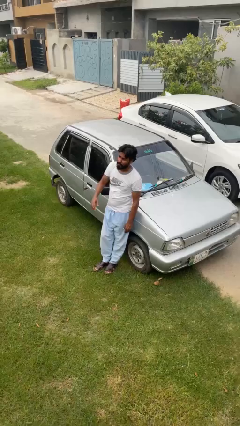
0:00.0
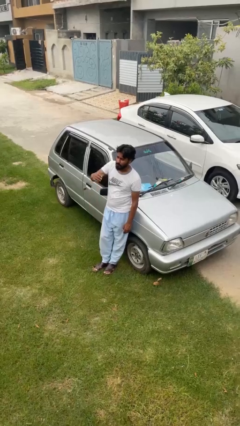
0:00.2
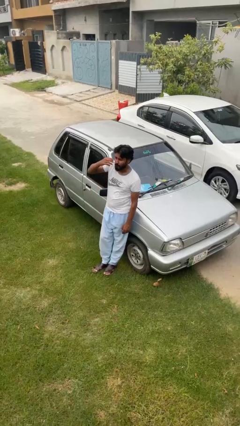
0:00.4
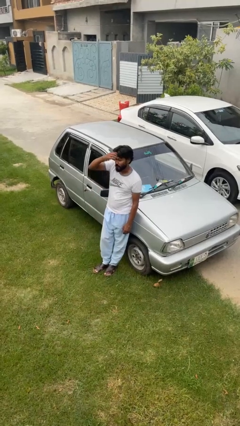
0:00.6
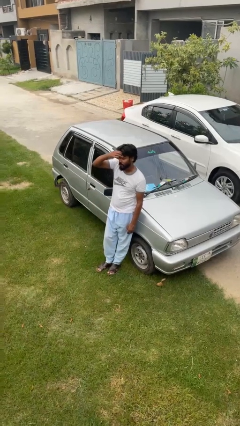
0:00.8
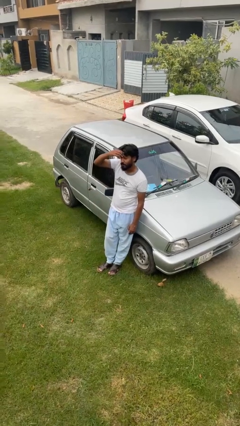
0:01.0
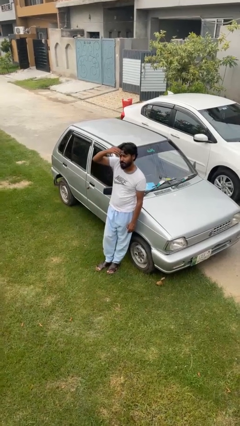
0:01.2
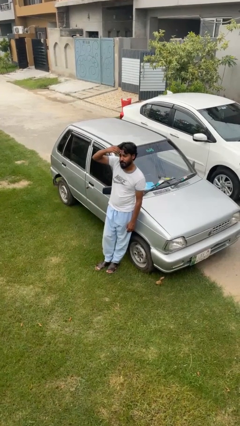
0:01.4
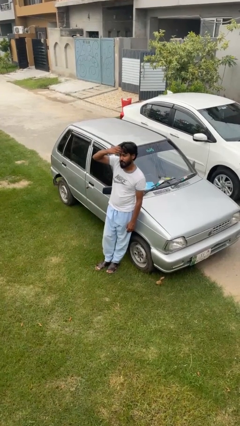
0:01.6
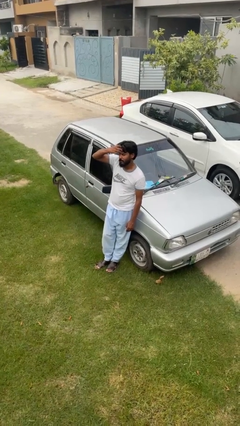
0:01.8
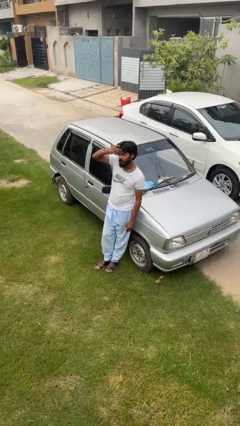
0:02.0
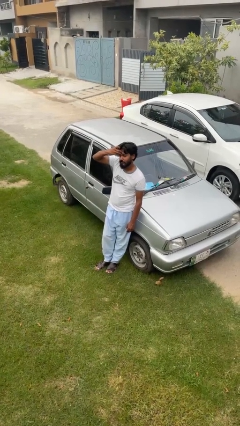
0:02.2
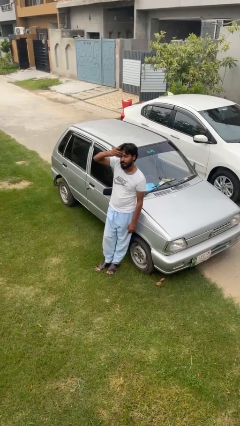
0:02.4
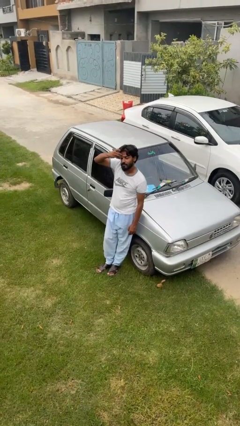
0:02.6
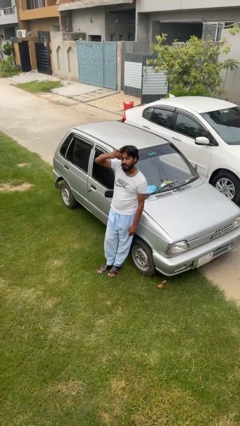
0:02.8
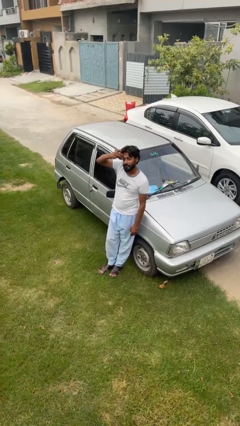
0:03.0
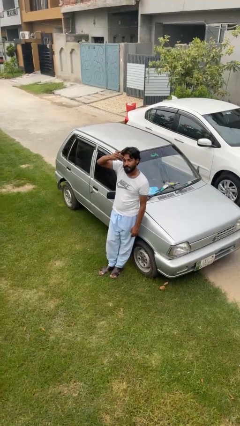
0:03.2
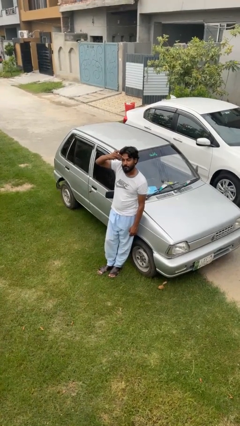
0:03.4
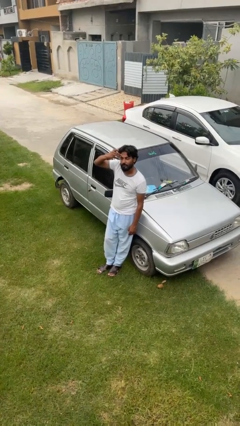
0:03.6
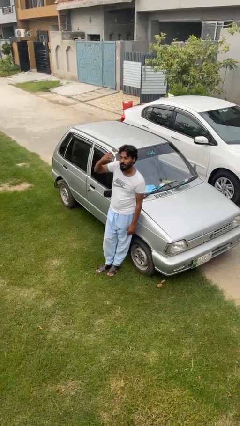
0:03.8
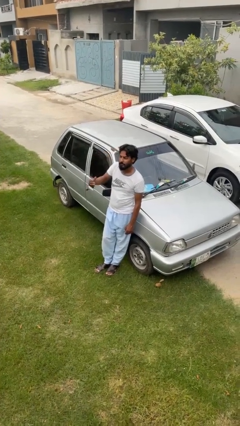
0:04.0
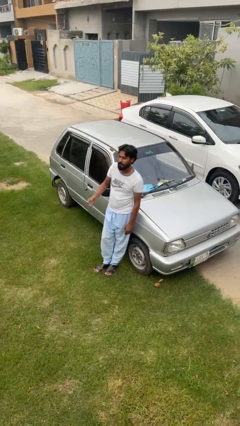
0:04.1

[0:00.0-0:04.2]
person scratches face

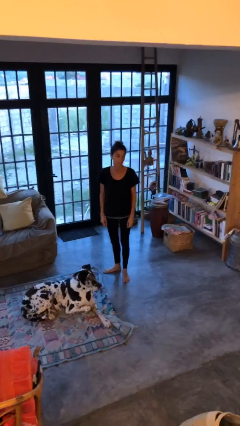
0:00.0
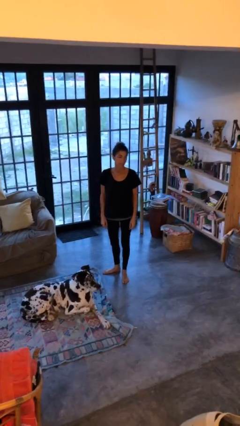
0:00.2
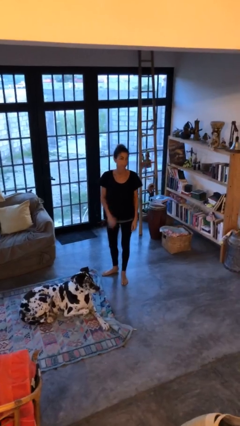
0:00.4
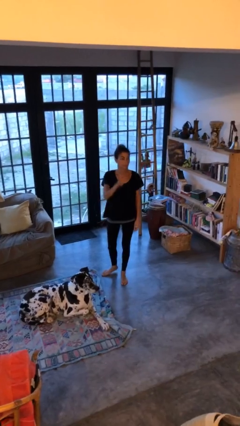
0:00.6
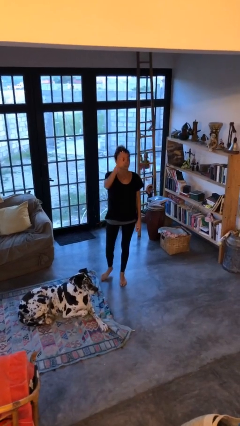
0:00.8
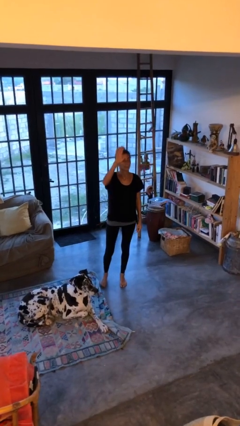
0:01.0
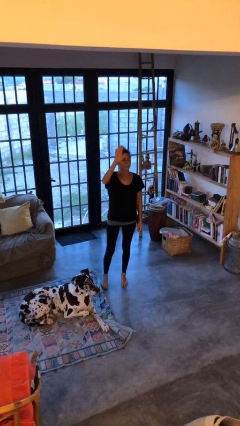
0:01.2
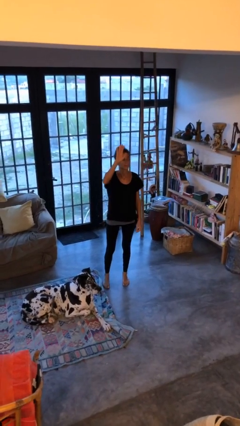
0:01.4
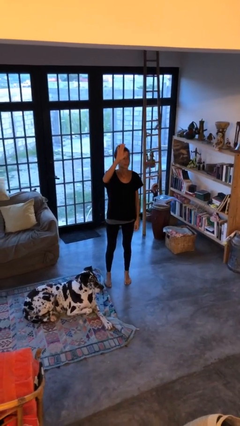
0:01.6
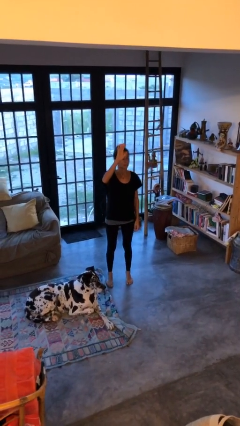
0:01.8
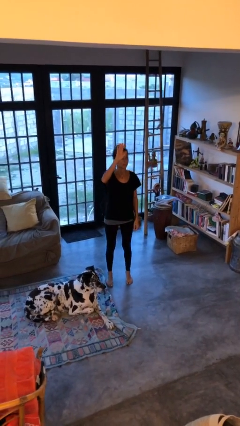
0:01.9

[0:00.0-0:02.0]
person gestures raise hand

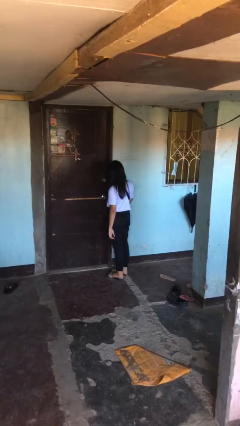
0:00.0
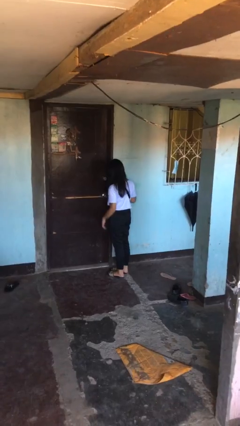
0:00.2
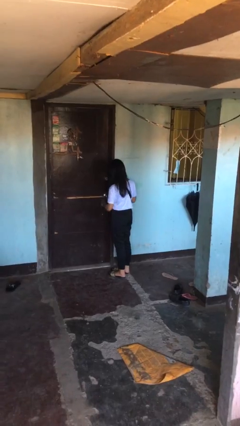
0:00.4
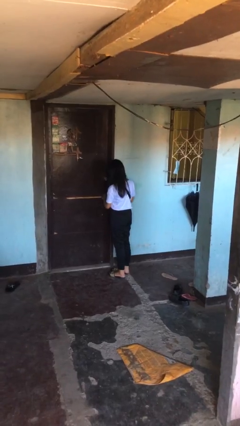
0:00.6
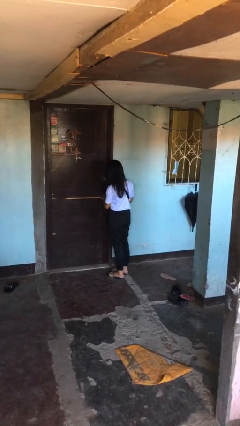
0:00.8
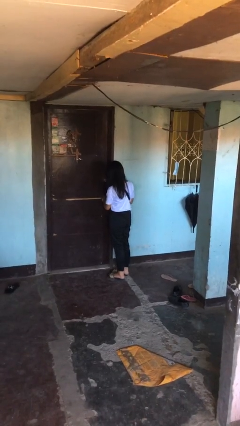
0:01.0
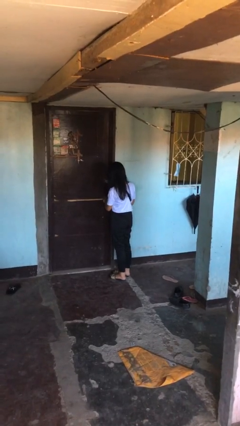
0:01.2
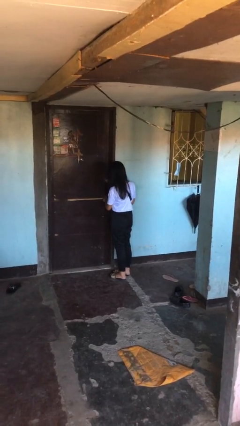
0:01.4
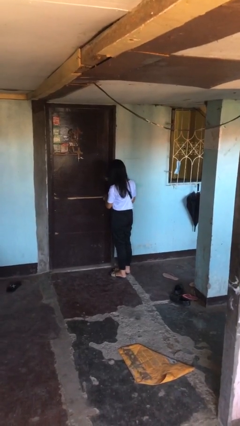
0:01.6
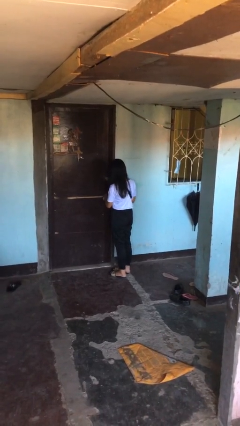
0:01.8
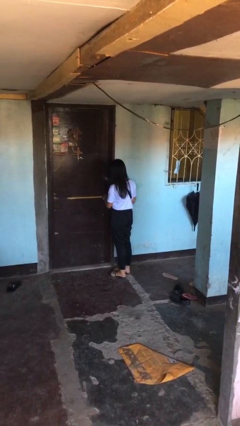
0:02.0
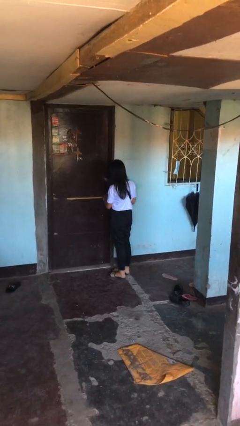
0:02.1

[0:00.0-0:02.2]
person unlocks door with keys

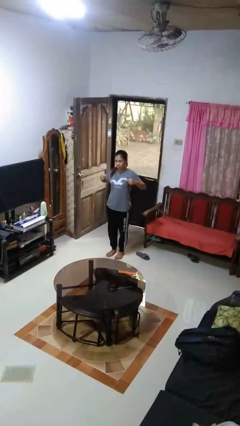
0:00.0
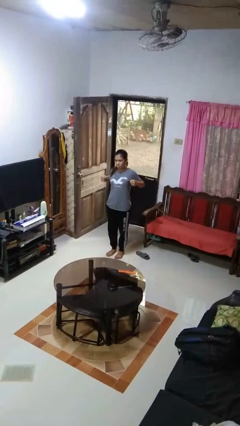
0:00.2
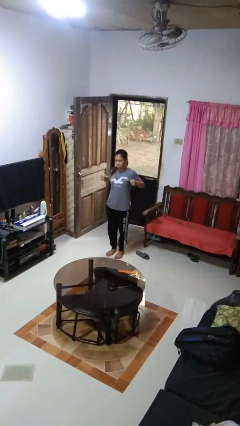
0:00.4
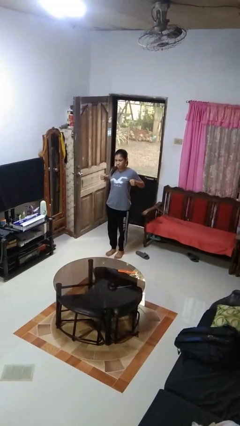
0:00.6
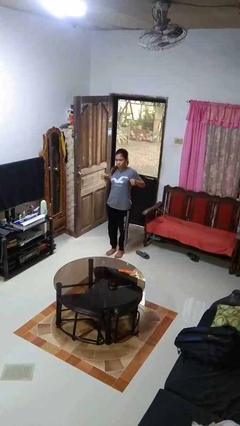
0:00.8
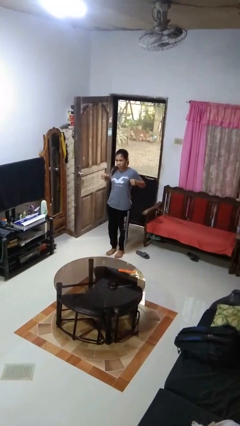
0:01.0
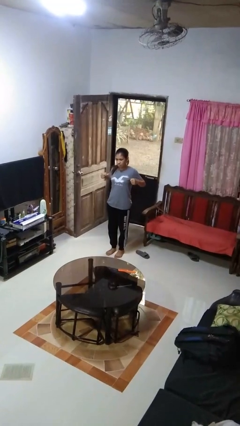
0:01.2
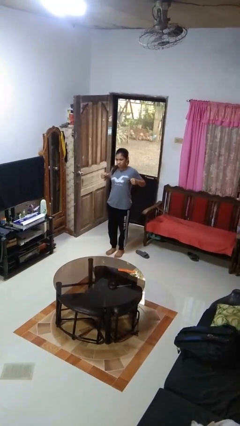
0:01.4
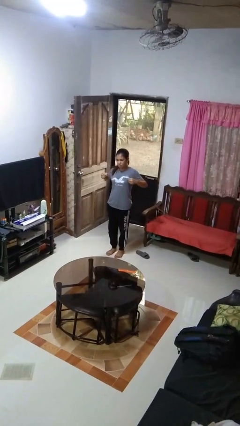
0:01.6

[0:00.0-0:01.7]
person gestures zoom in

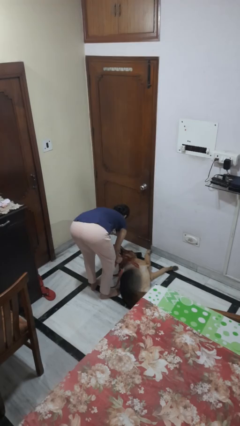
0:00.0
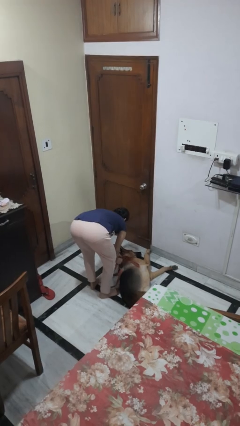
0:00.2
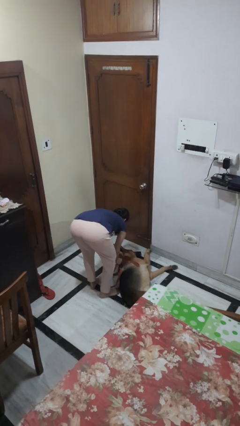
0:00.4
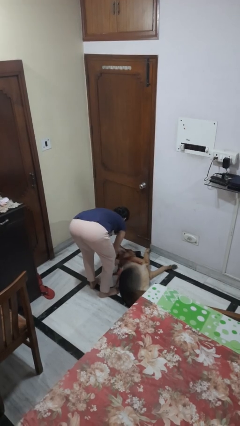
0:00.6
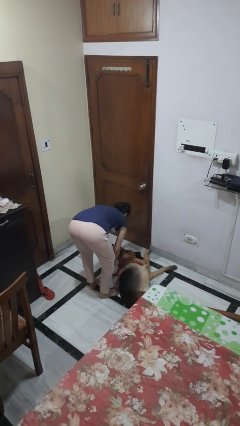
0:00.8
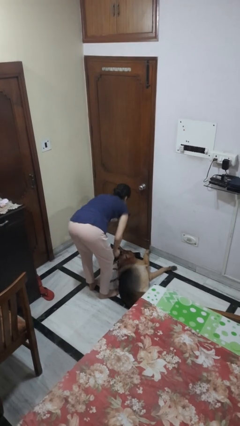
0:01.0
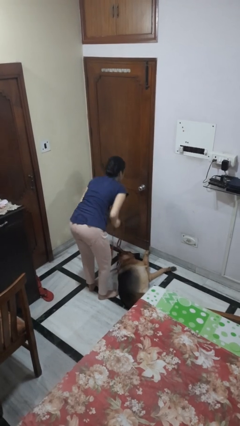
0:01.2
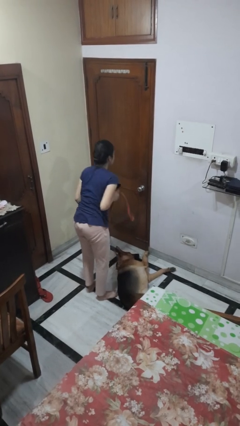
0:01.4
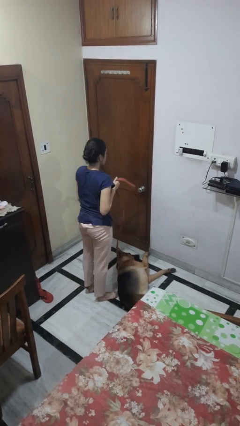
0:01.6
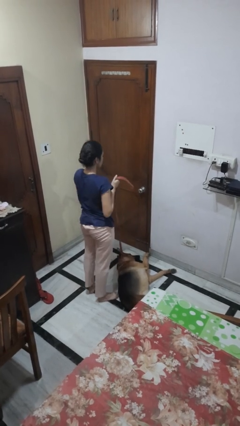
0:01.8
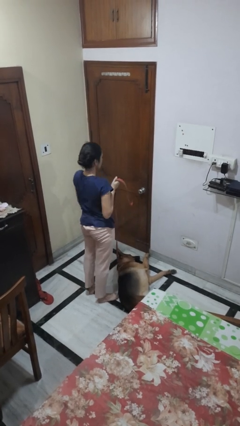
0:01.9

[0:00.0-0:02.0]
person attaches leash to dog

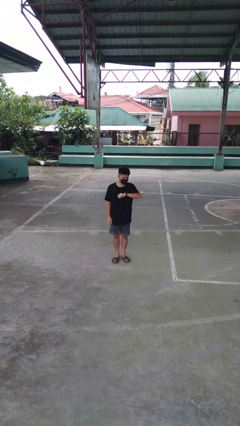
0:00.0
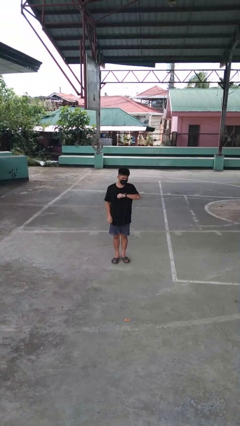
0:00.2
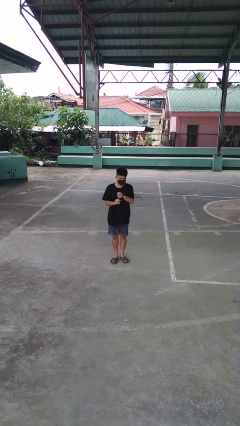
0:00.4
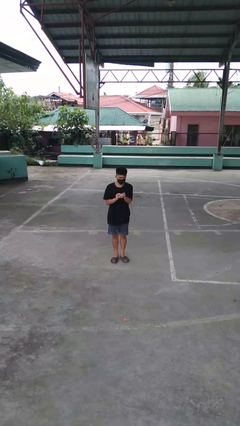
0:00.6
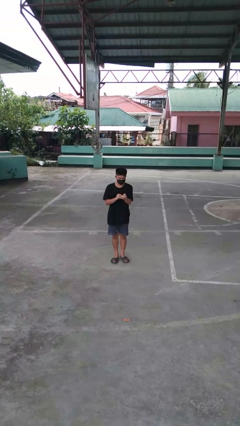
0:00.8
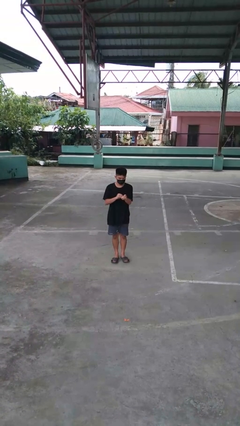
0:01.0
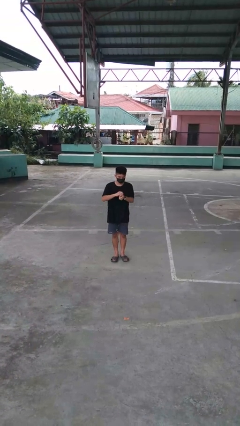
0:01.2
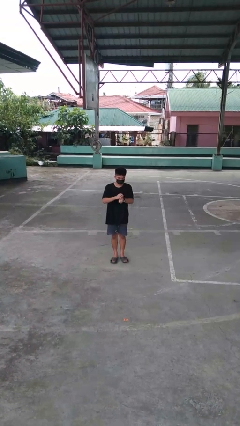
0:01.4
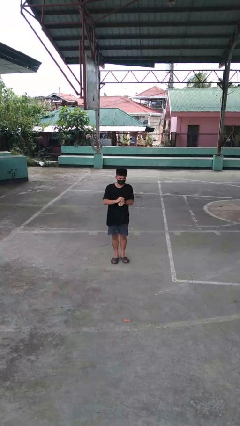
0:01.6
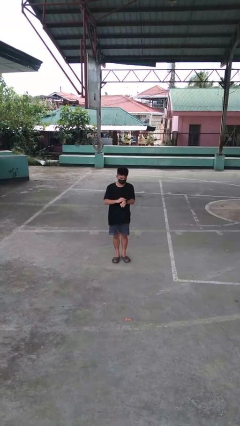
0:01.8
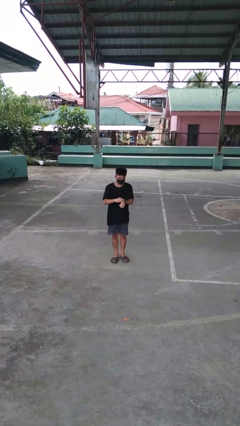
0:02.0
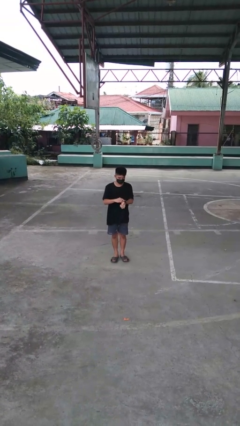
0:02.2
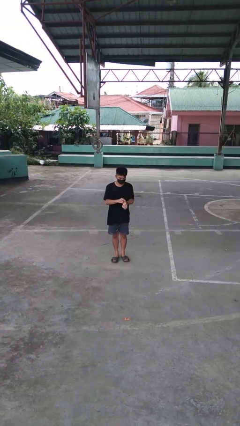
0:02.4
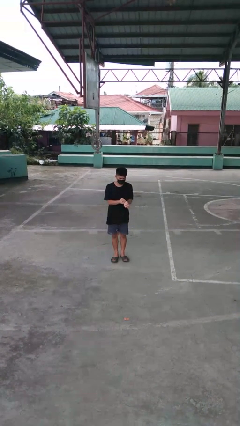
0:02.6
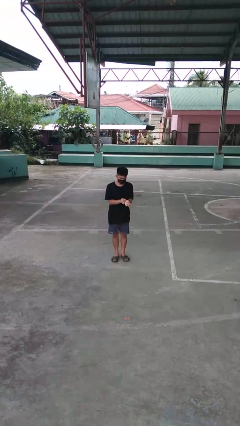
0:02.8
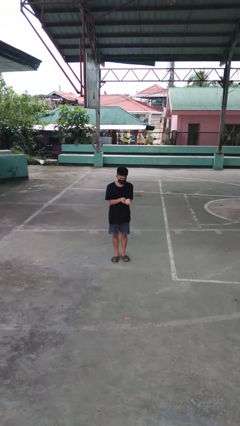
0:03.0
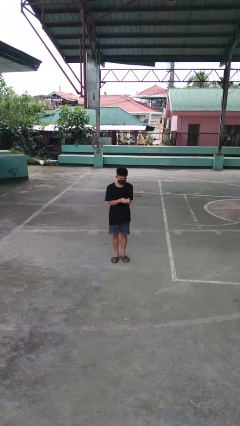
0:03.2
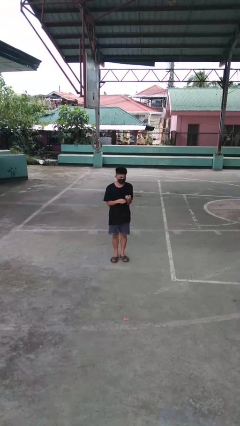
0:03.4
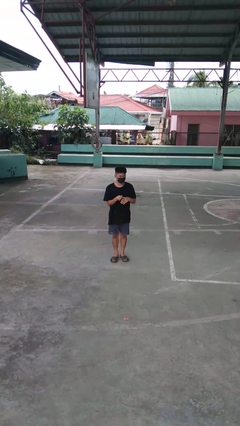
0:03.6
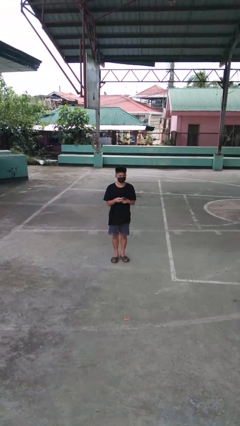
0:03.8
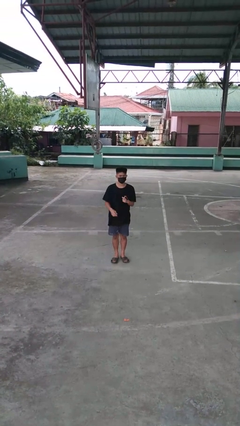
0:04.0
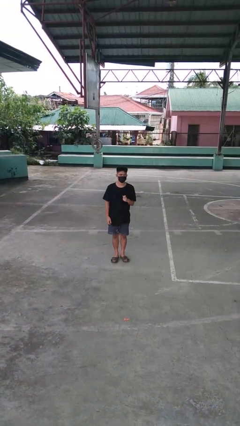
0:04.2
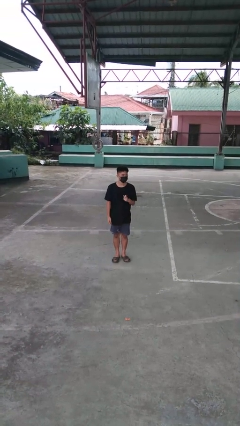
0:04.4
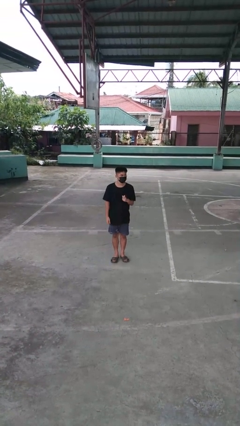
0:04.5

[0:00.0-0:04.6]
person takes off wristwatch

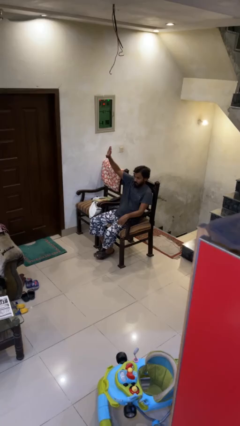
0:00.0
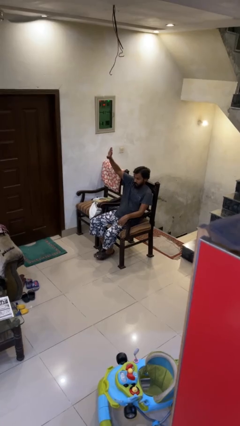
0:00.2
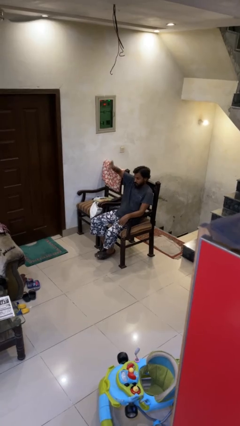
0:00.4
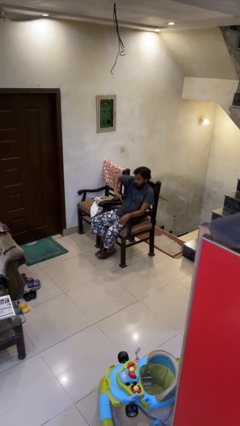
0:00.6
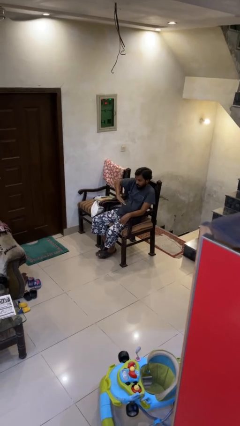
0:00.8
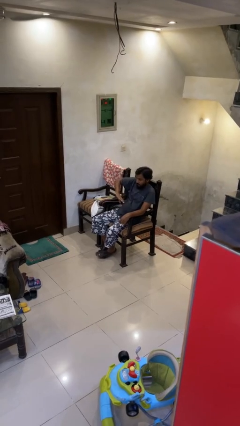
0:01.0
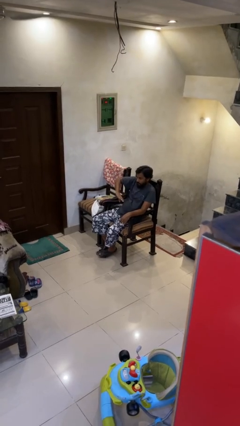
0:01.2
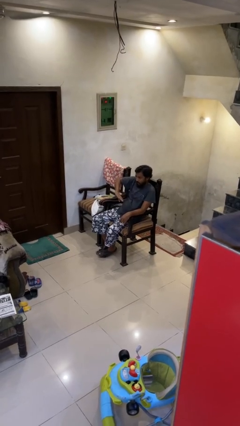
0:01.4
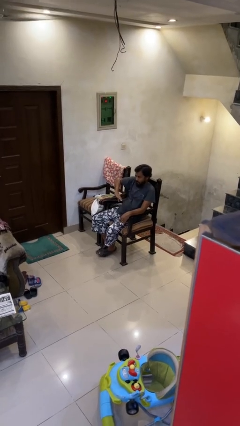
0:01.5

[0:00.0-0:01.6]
person gestures swipe down
